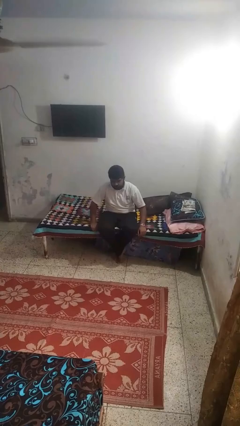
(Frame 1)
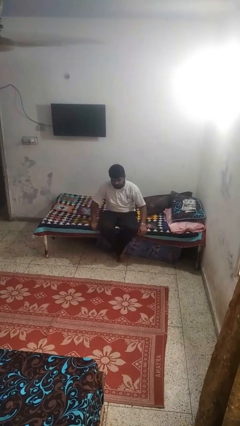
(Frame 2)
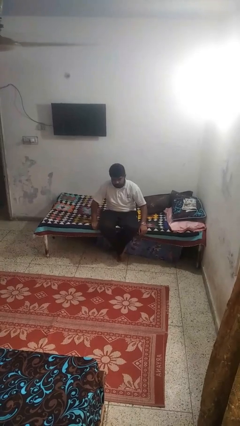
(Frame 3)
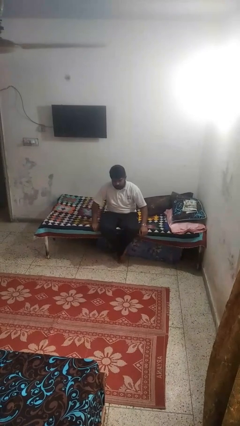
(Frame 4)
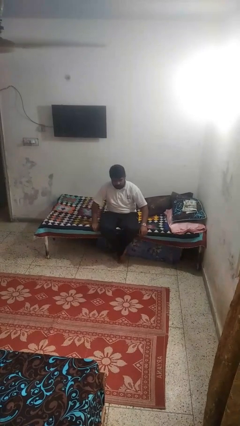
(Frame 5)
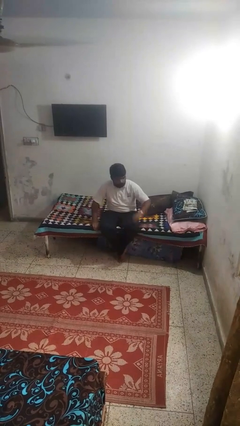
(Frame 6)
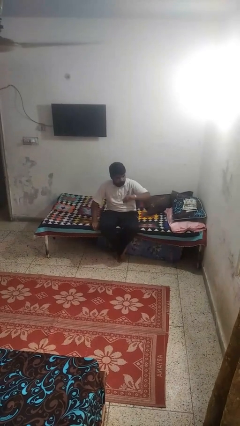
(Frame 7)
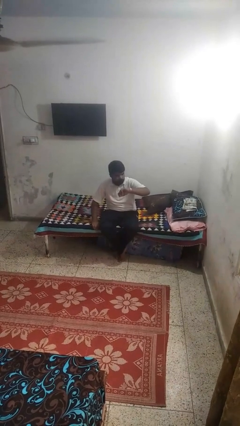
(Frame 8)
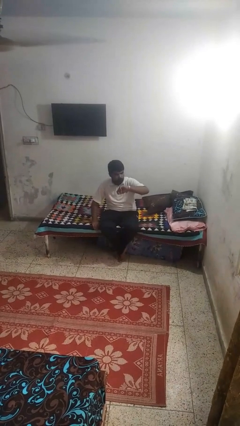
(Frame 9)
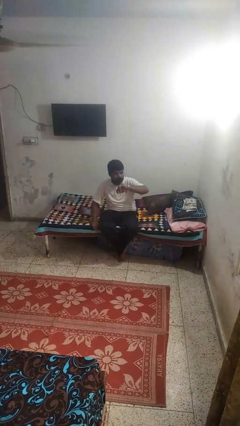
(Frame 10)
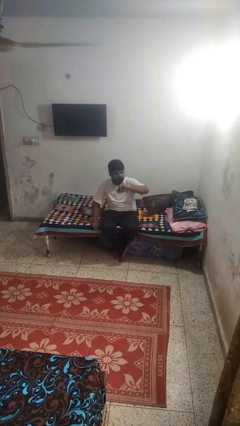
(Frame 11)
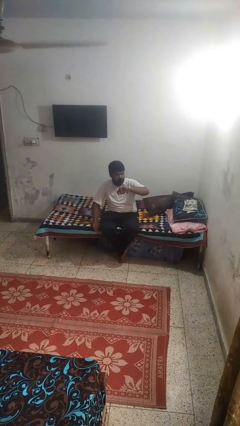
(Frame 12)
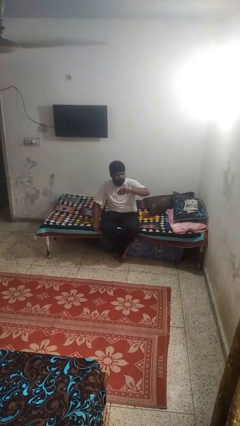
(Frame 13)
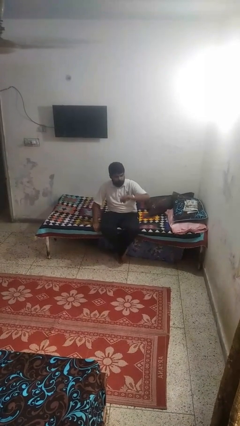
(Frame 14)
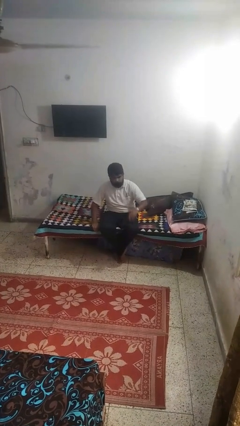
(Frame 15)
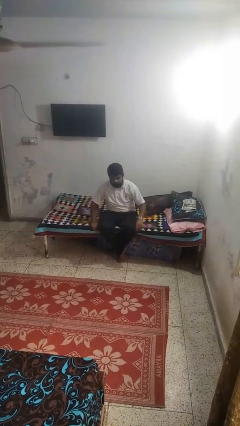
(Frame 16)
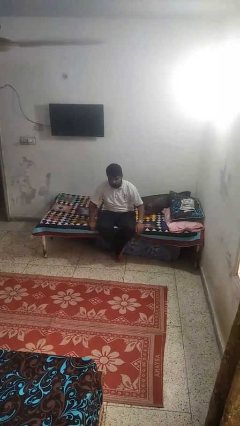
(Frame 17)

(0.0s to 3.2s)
person looks at wristwatch

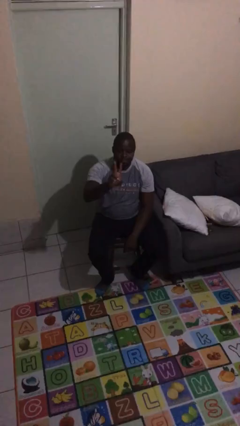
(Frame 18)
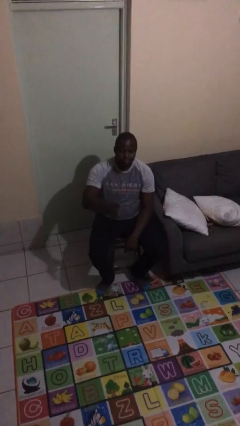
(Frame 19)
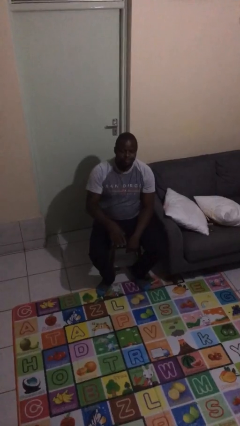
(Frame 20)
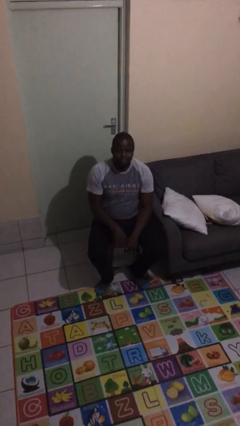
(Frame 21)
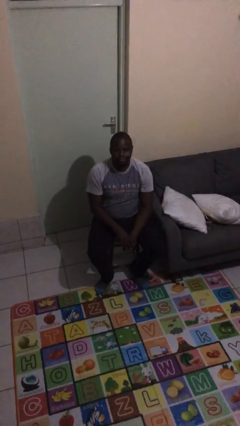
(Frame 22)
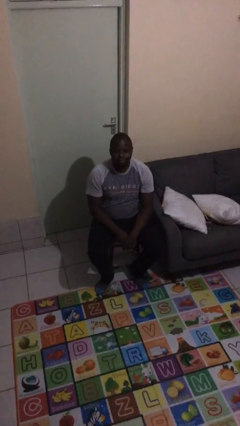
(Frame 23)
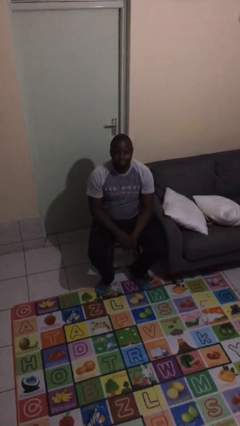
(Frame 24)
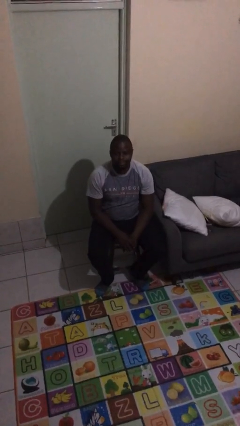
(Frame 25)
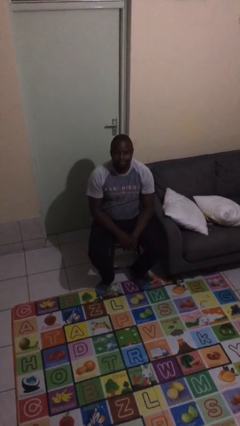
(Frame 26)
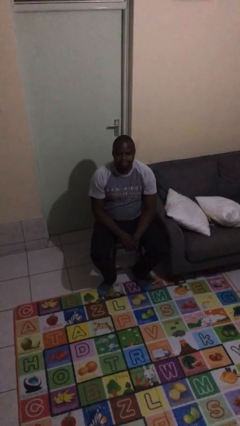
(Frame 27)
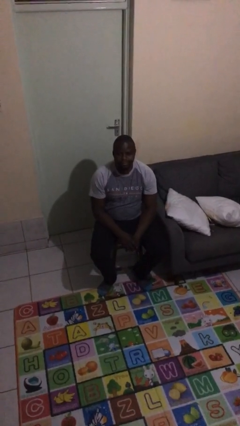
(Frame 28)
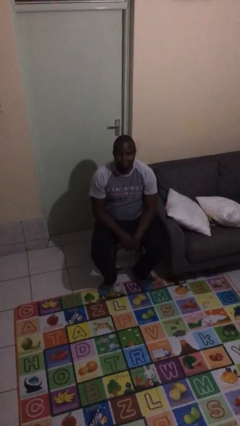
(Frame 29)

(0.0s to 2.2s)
person gestures peace

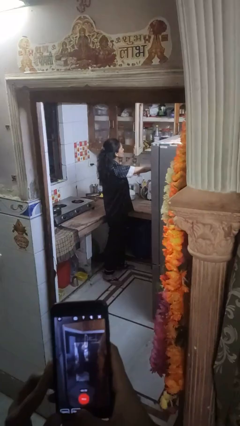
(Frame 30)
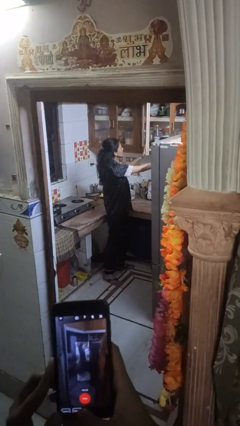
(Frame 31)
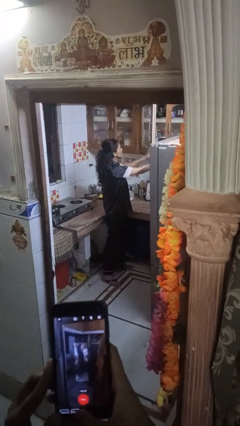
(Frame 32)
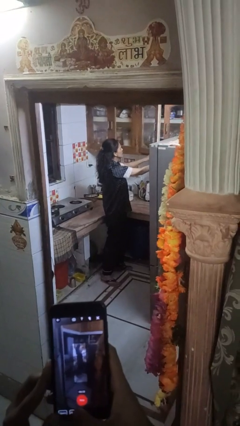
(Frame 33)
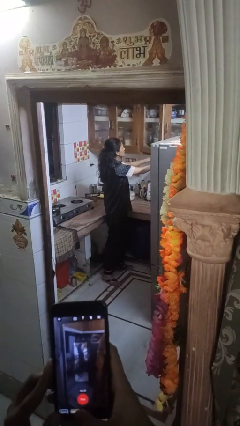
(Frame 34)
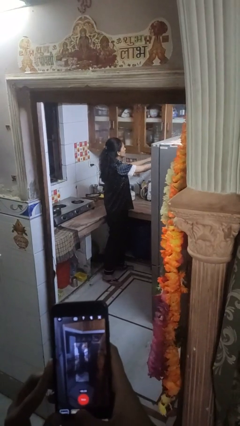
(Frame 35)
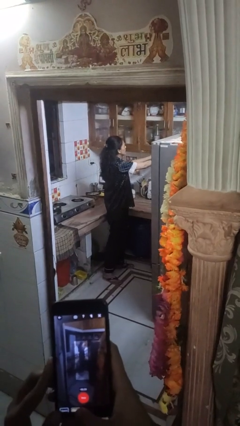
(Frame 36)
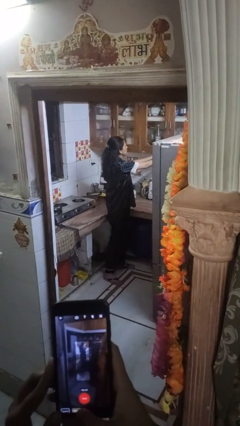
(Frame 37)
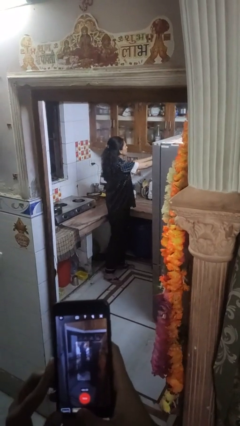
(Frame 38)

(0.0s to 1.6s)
person closes cabinet

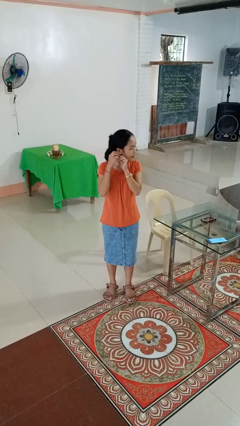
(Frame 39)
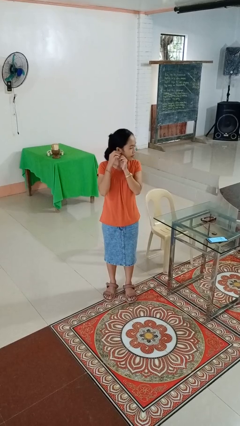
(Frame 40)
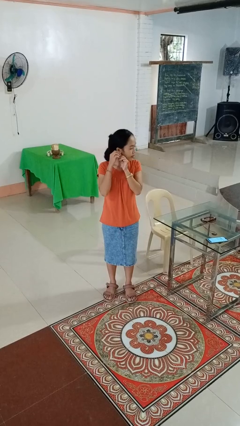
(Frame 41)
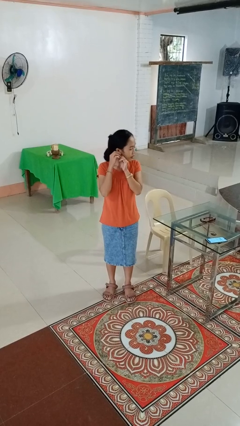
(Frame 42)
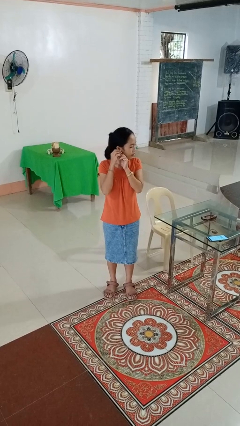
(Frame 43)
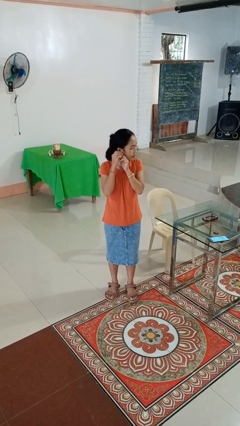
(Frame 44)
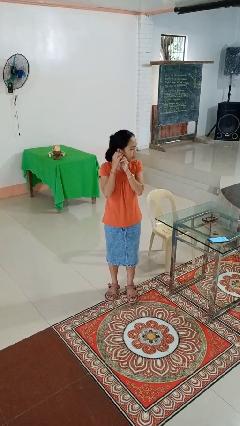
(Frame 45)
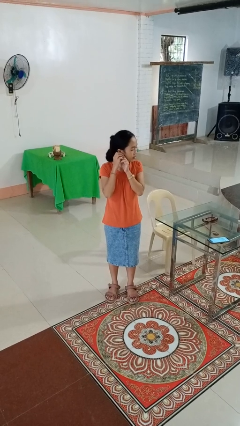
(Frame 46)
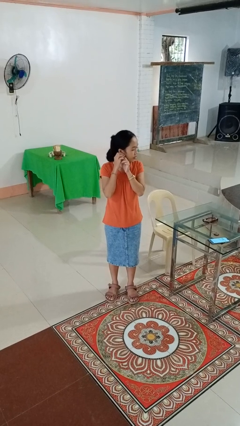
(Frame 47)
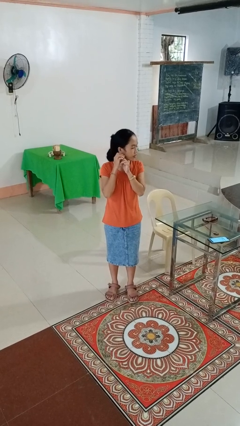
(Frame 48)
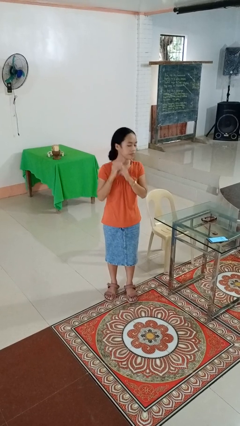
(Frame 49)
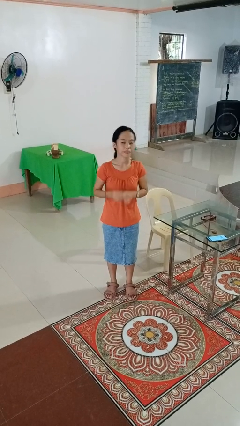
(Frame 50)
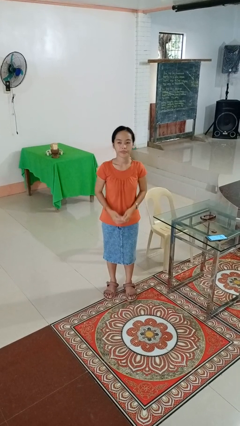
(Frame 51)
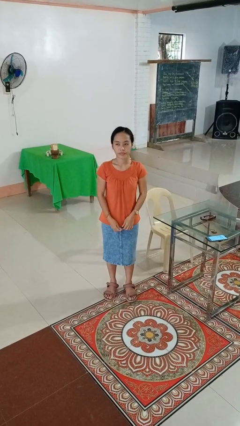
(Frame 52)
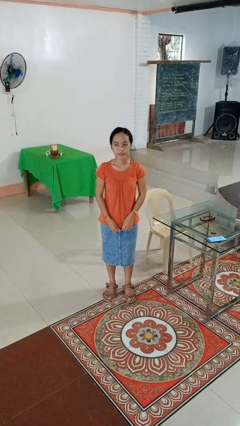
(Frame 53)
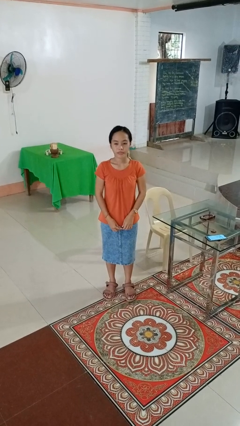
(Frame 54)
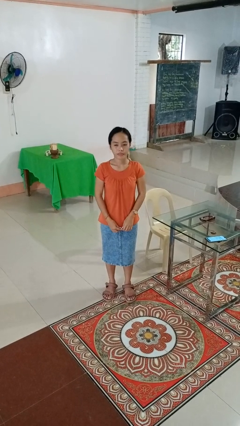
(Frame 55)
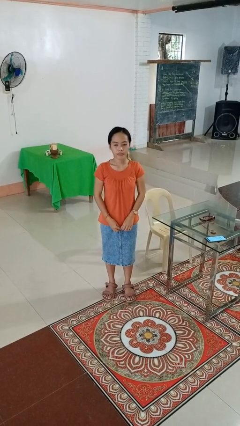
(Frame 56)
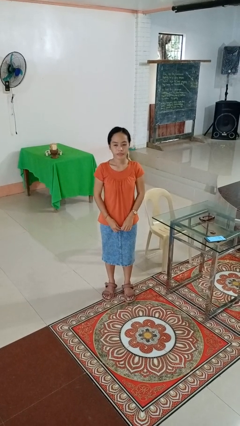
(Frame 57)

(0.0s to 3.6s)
person takes off earrings

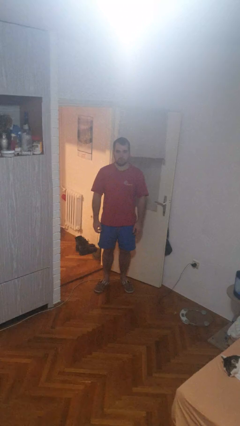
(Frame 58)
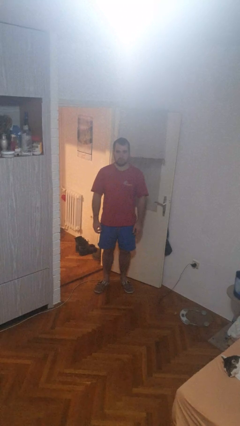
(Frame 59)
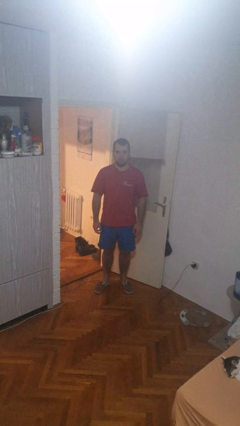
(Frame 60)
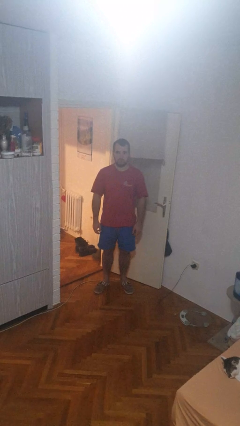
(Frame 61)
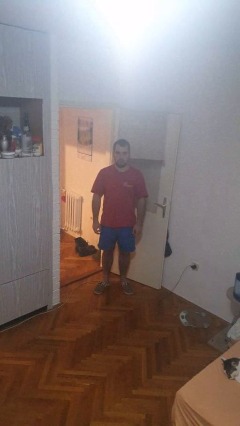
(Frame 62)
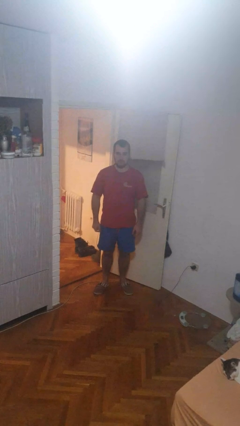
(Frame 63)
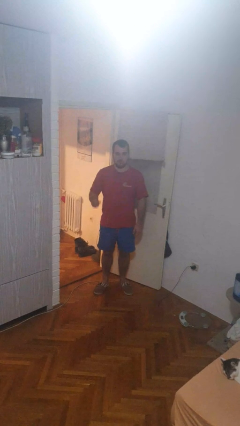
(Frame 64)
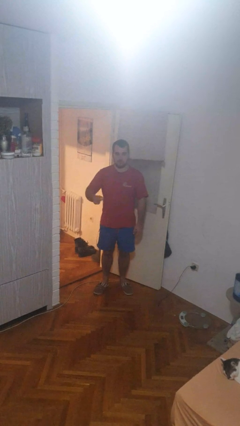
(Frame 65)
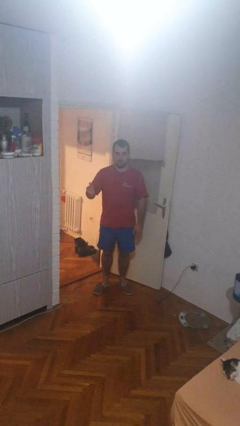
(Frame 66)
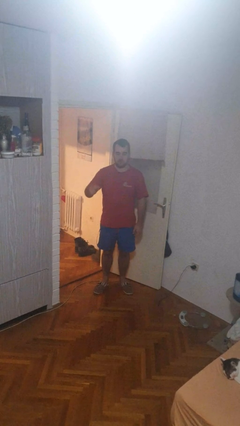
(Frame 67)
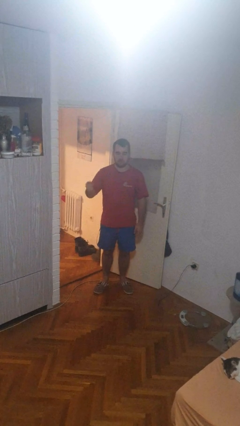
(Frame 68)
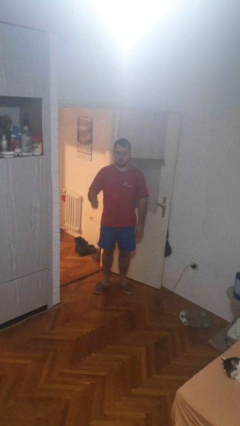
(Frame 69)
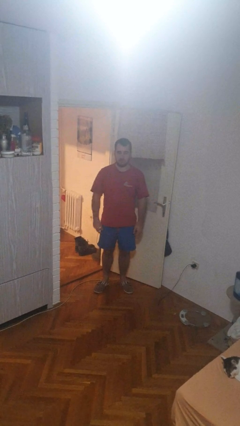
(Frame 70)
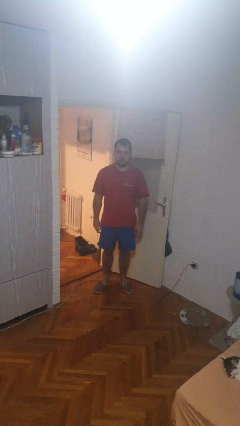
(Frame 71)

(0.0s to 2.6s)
person snaps fingers

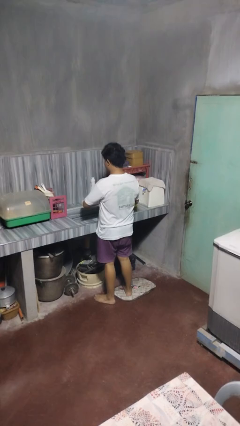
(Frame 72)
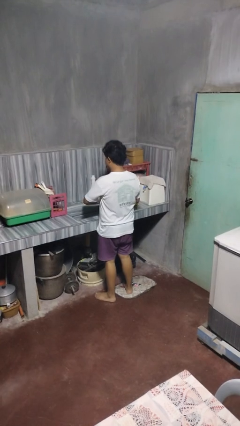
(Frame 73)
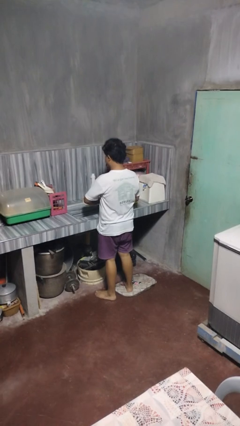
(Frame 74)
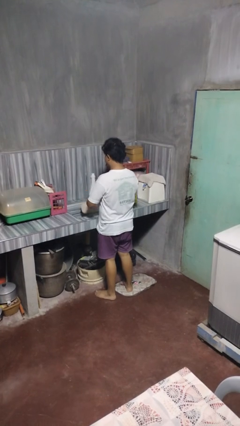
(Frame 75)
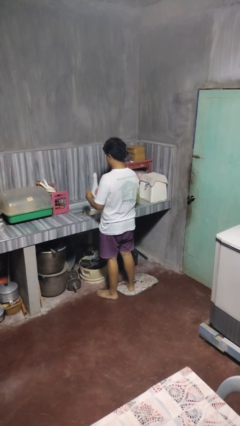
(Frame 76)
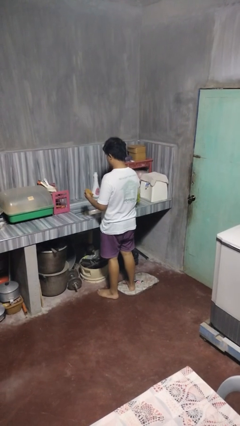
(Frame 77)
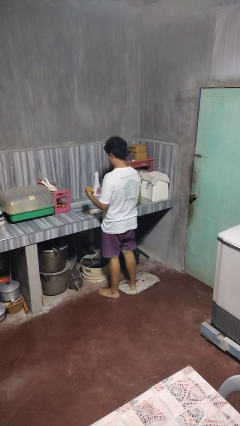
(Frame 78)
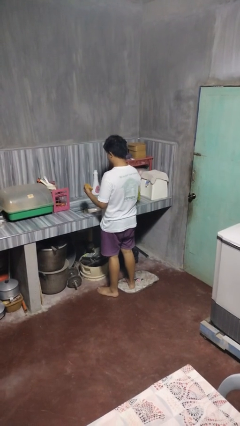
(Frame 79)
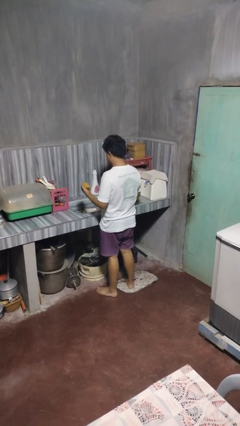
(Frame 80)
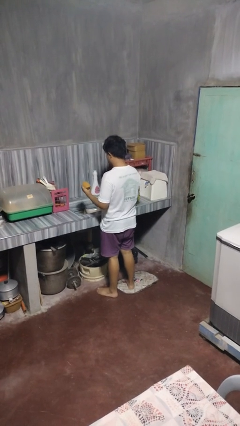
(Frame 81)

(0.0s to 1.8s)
person washes dish

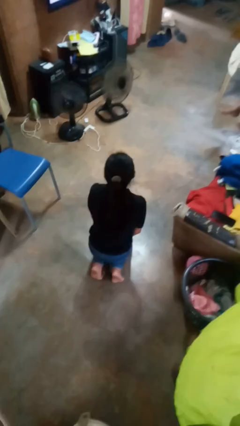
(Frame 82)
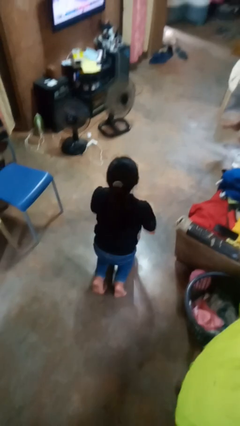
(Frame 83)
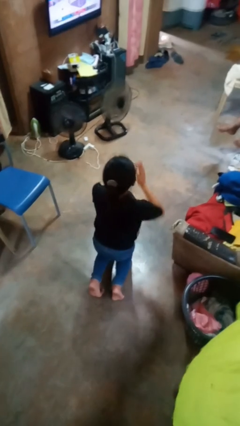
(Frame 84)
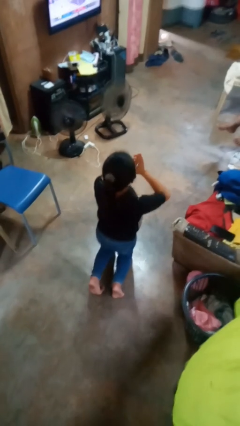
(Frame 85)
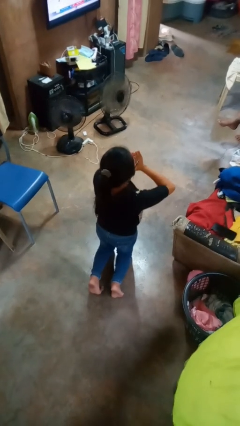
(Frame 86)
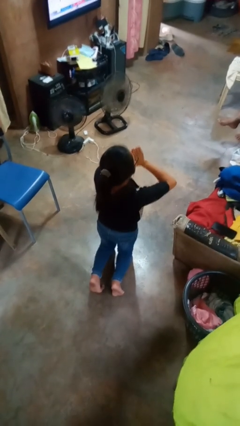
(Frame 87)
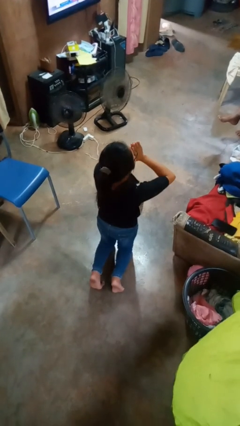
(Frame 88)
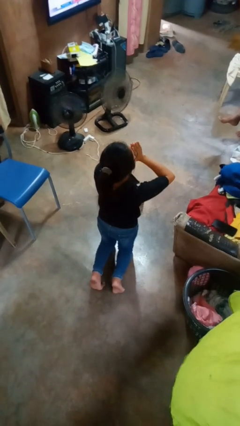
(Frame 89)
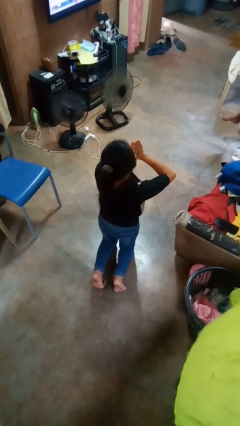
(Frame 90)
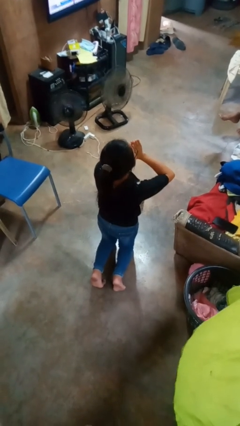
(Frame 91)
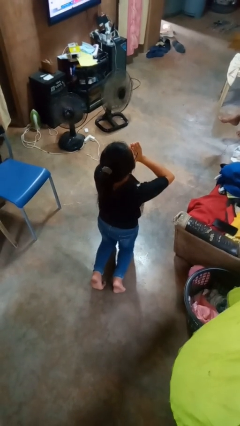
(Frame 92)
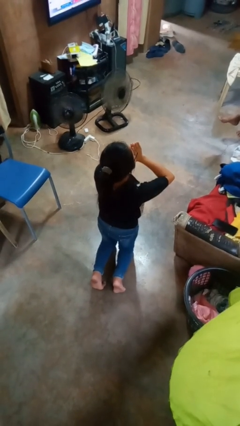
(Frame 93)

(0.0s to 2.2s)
person prays
